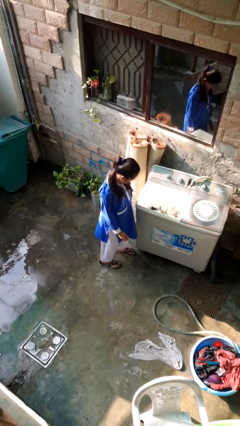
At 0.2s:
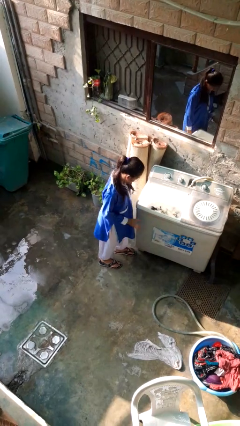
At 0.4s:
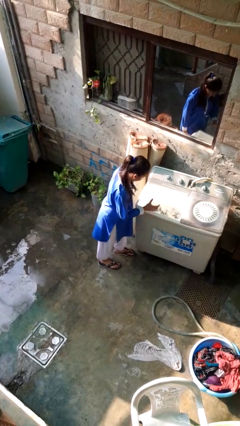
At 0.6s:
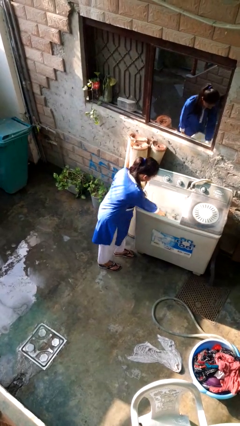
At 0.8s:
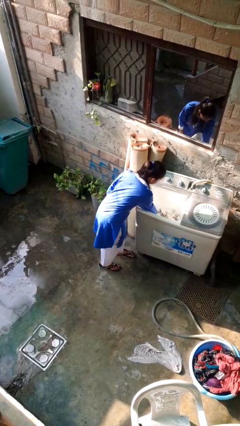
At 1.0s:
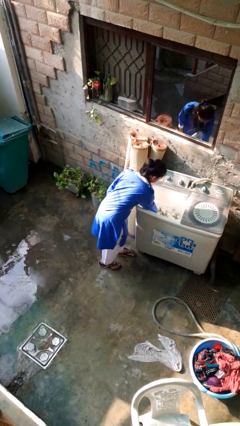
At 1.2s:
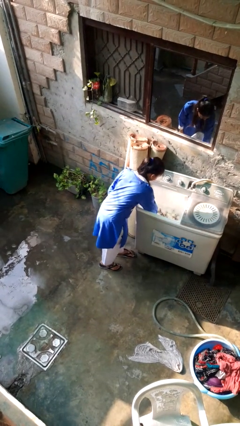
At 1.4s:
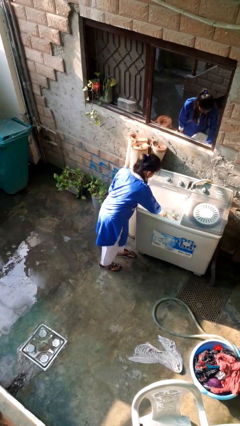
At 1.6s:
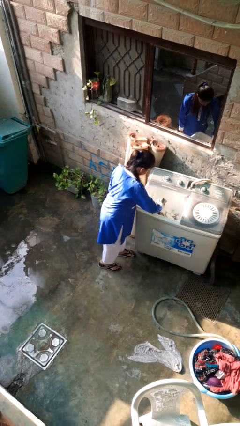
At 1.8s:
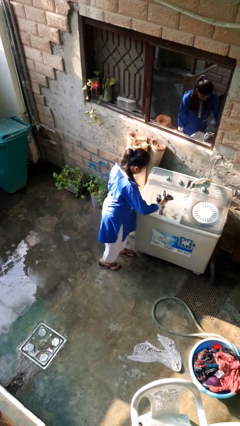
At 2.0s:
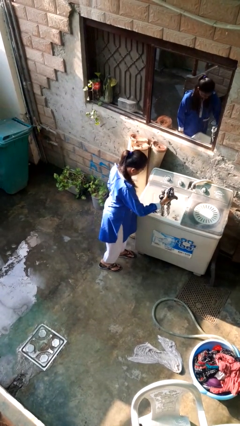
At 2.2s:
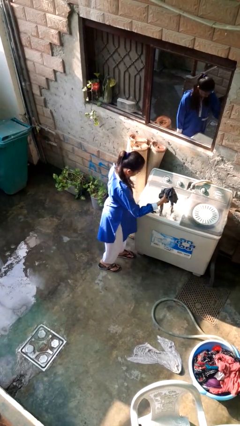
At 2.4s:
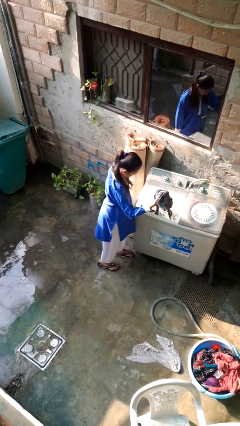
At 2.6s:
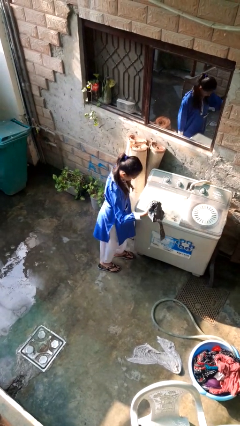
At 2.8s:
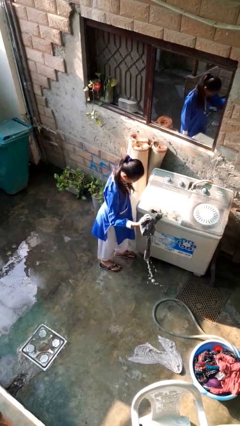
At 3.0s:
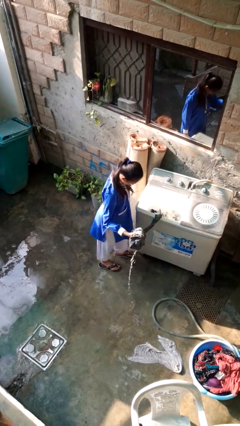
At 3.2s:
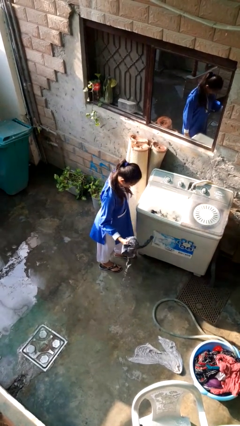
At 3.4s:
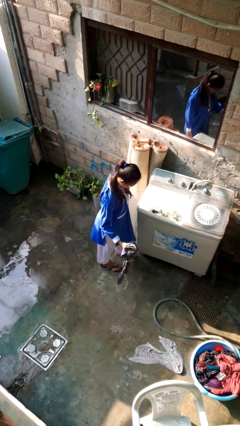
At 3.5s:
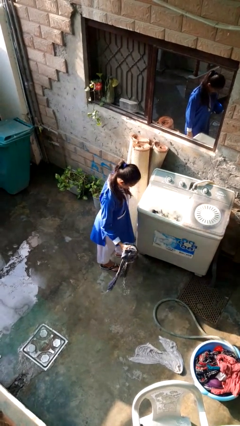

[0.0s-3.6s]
person unloads clotheswasher

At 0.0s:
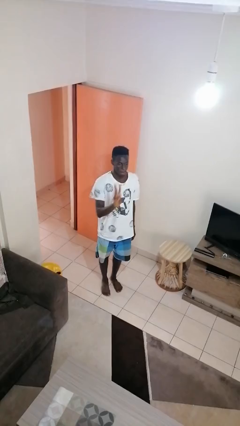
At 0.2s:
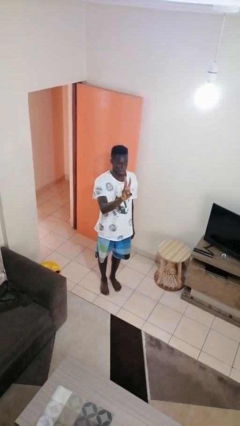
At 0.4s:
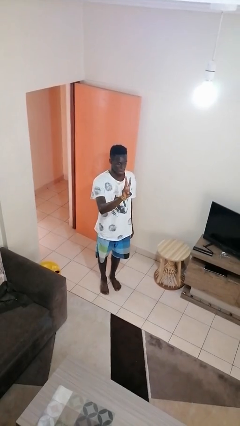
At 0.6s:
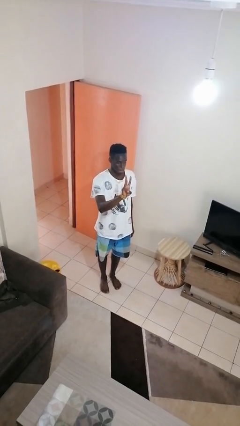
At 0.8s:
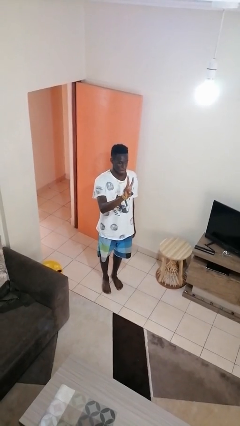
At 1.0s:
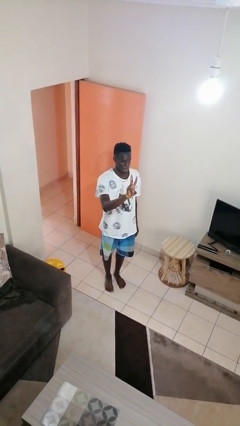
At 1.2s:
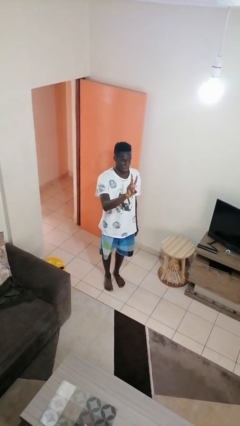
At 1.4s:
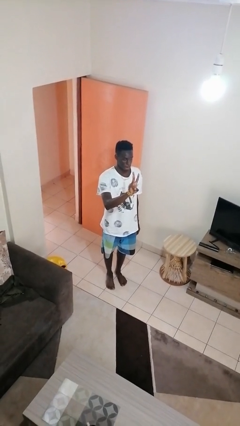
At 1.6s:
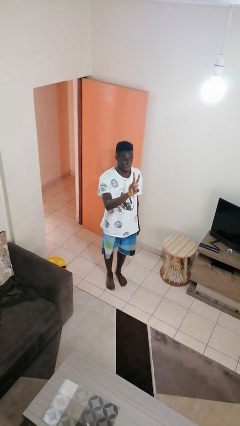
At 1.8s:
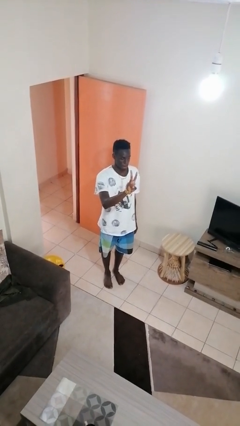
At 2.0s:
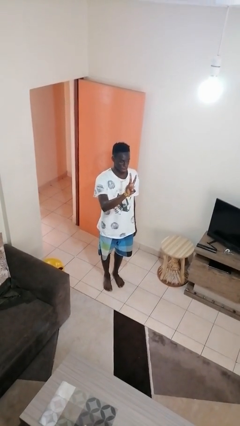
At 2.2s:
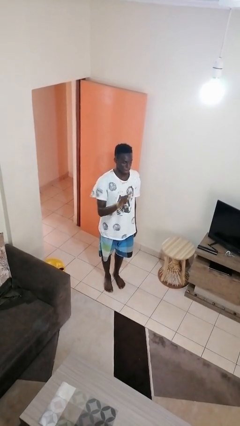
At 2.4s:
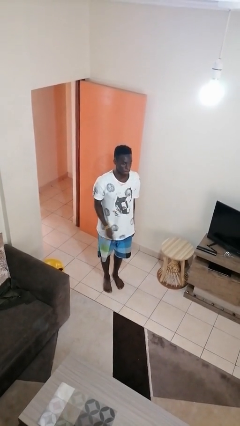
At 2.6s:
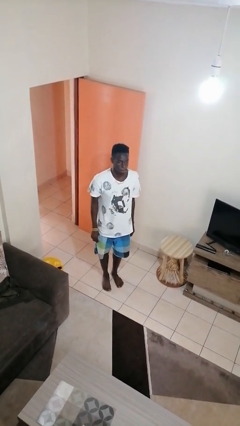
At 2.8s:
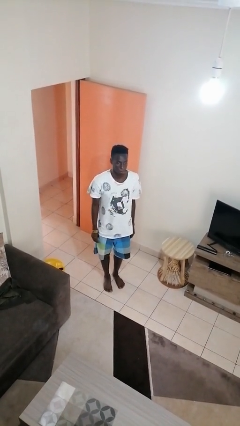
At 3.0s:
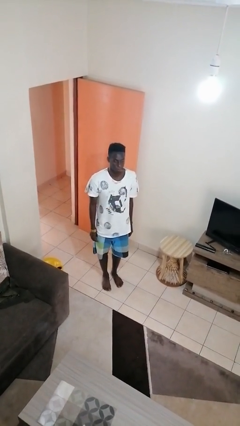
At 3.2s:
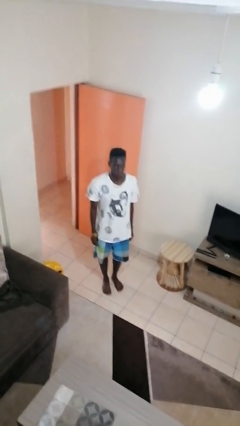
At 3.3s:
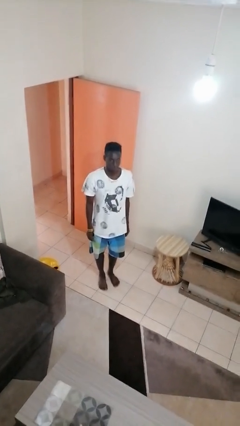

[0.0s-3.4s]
person gestures number three

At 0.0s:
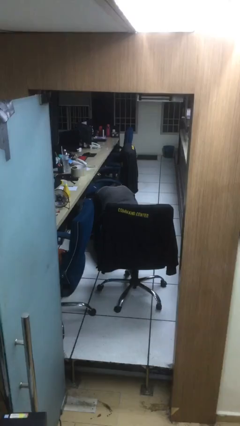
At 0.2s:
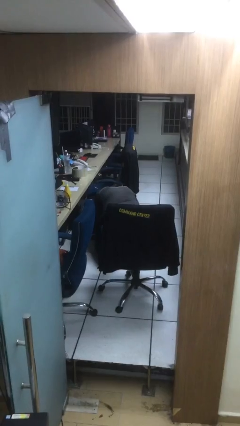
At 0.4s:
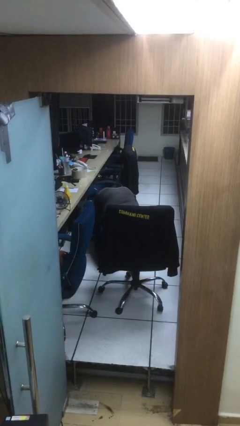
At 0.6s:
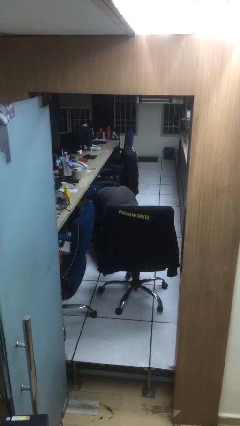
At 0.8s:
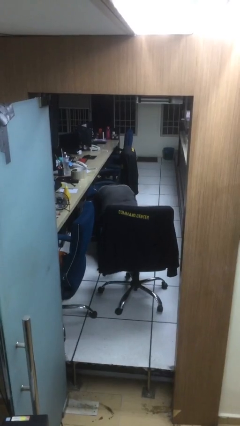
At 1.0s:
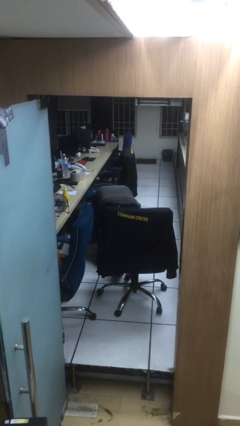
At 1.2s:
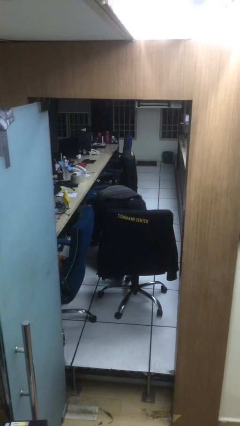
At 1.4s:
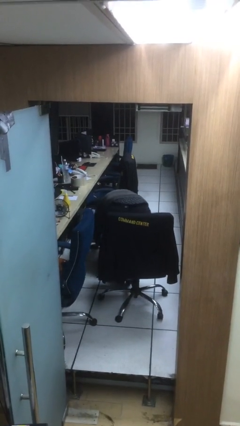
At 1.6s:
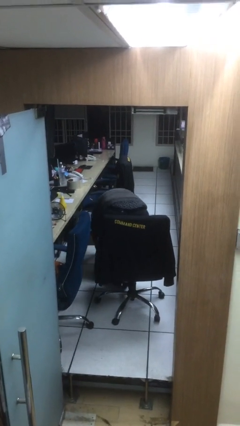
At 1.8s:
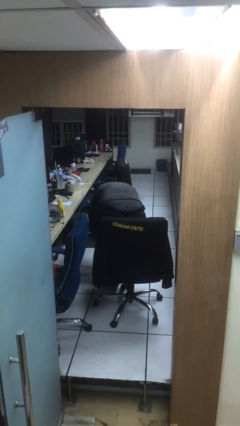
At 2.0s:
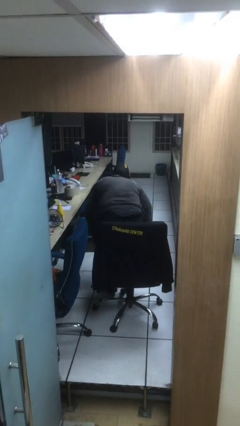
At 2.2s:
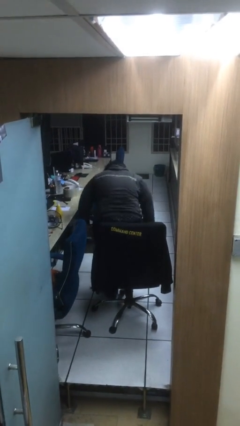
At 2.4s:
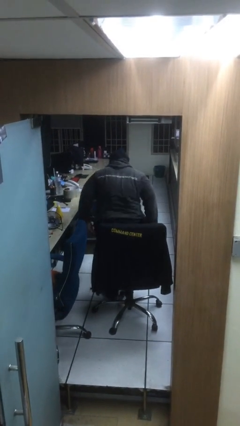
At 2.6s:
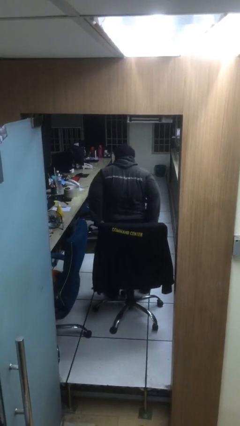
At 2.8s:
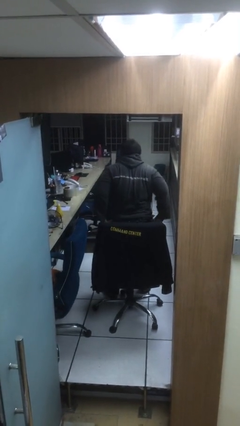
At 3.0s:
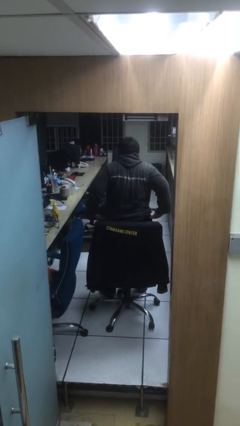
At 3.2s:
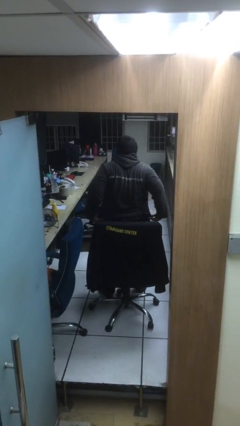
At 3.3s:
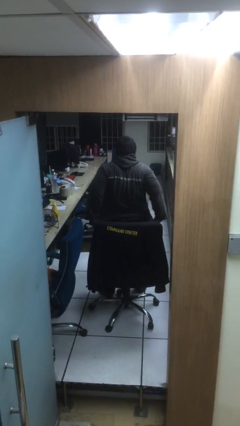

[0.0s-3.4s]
person stands up from floor

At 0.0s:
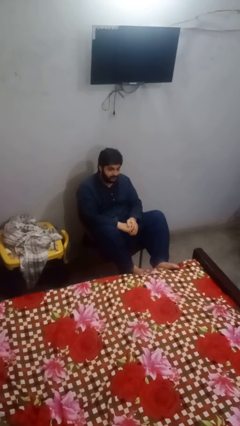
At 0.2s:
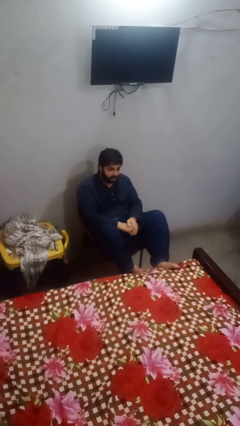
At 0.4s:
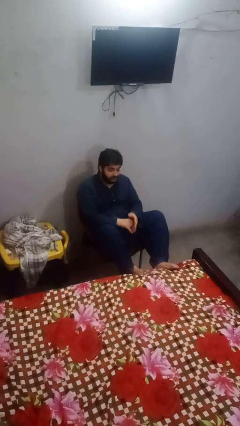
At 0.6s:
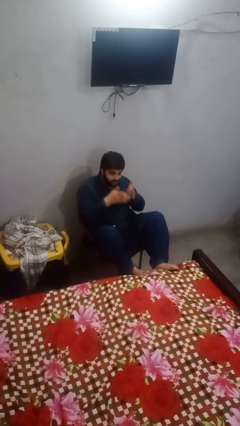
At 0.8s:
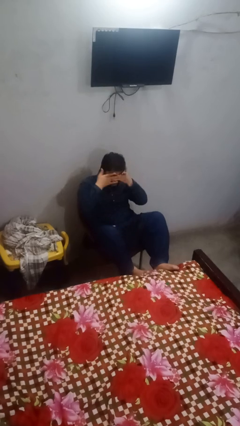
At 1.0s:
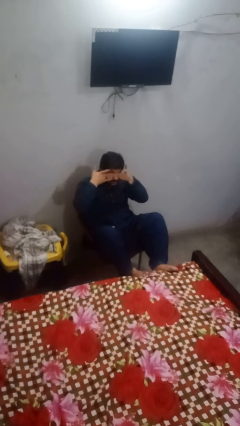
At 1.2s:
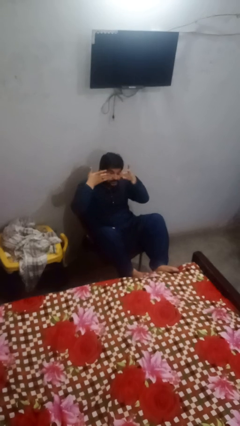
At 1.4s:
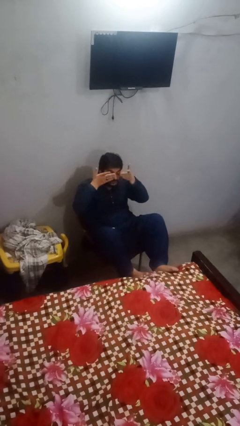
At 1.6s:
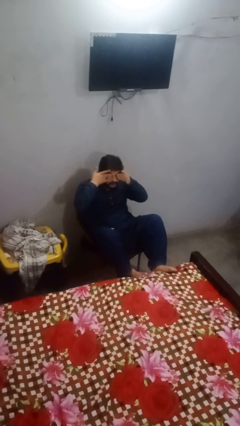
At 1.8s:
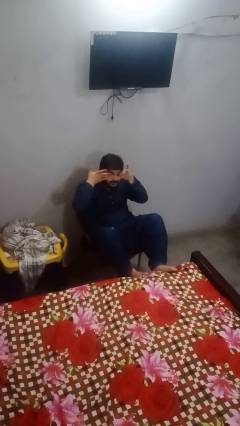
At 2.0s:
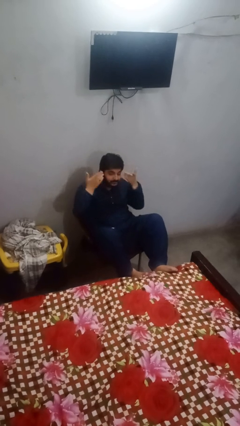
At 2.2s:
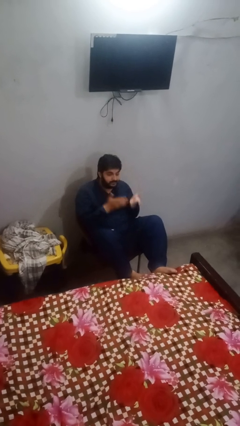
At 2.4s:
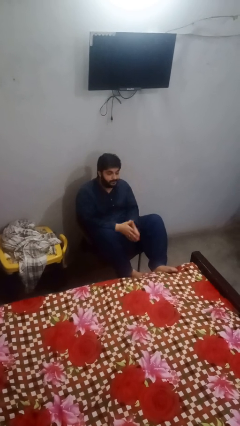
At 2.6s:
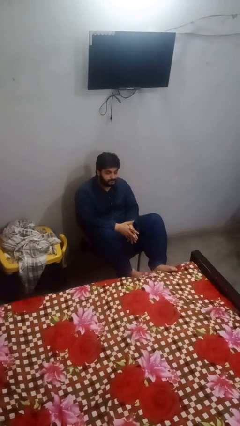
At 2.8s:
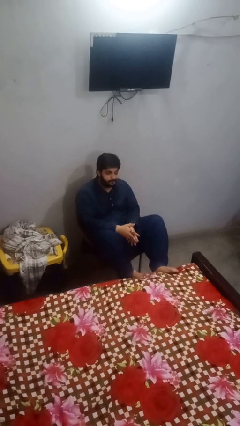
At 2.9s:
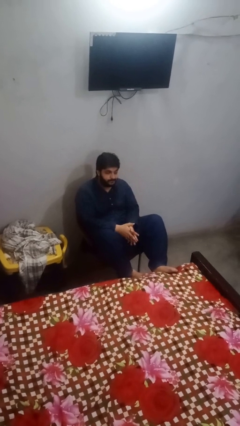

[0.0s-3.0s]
person rubs eyes

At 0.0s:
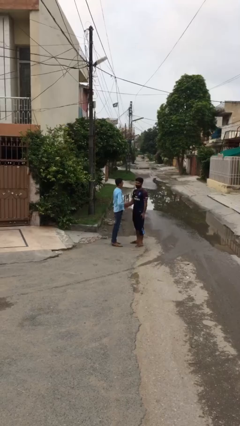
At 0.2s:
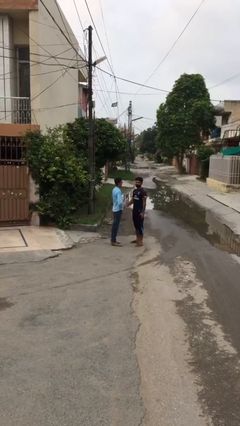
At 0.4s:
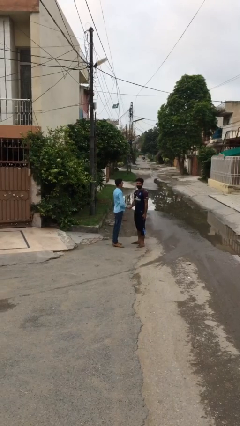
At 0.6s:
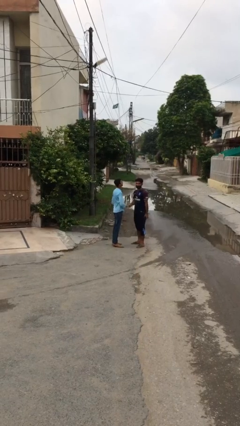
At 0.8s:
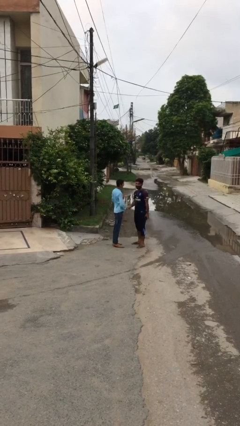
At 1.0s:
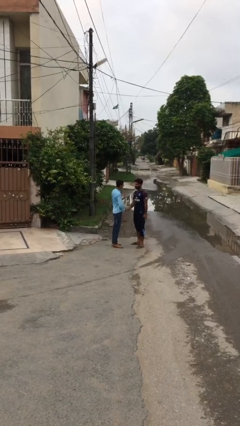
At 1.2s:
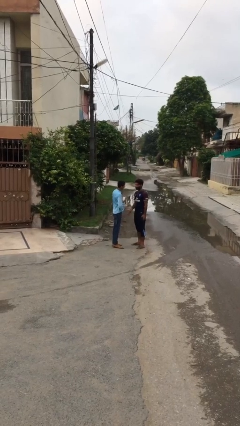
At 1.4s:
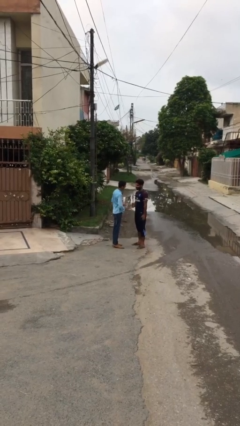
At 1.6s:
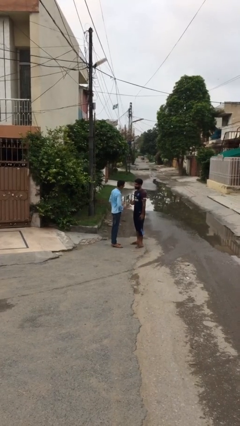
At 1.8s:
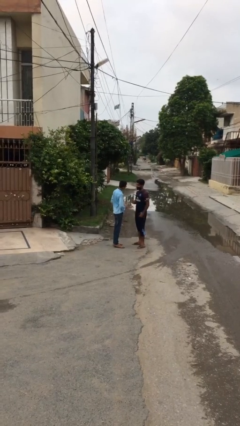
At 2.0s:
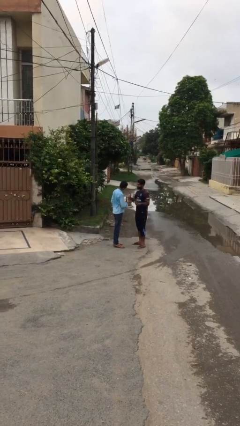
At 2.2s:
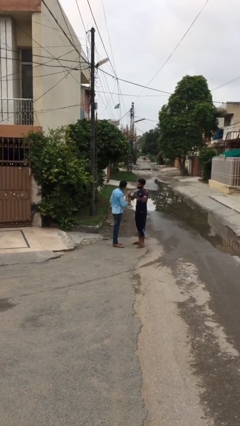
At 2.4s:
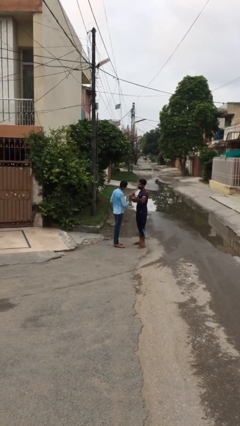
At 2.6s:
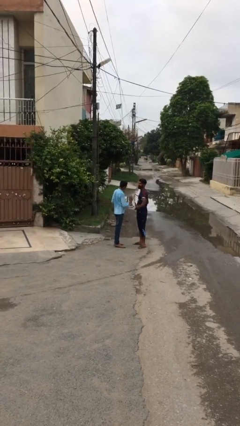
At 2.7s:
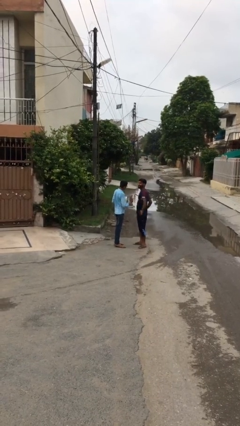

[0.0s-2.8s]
person talks to person

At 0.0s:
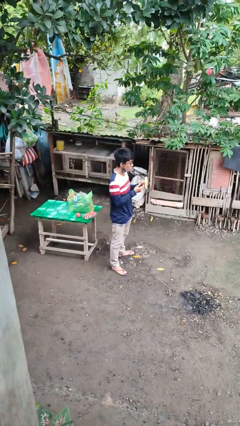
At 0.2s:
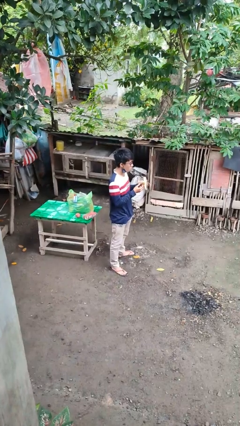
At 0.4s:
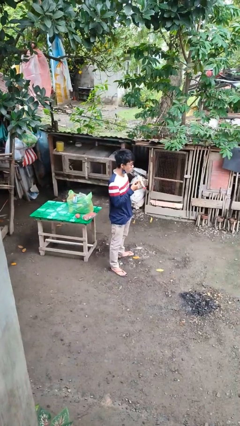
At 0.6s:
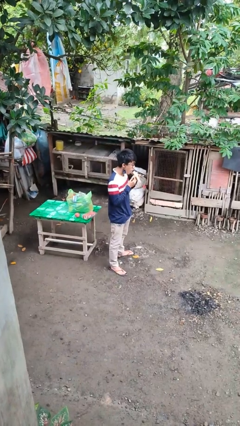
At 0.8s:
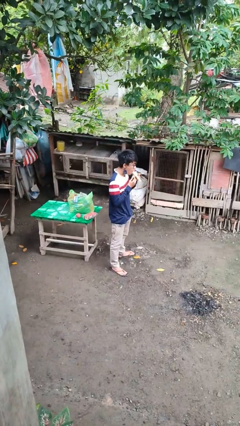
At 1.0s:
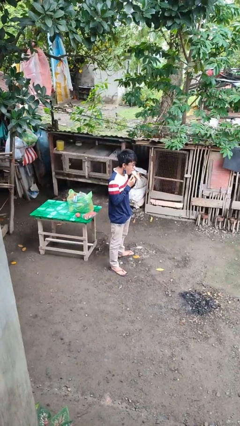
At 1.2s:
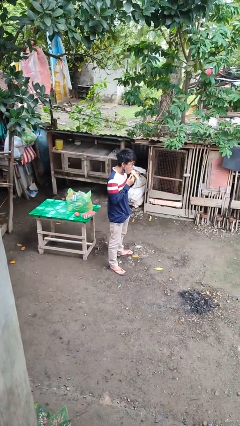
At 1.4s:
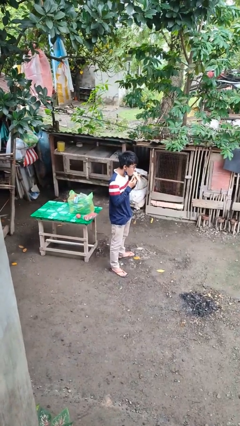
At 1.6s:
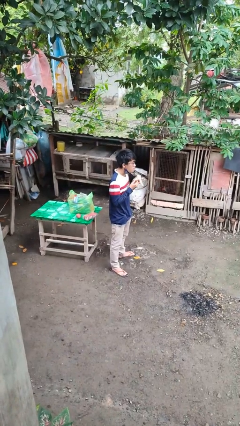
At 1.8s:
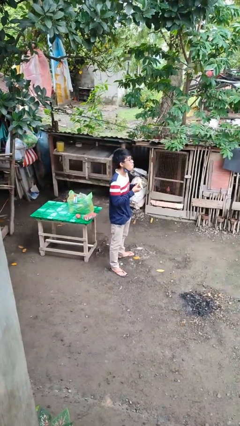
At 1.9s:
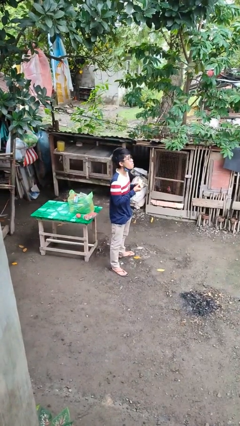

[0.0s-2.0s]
person eats banana
